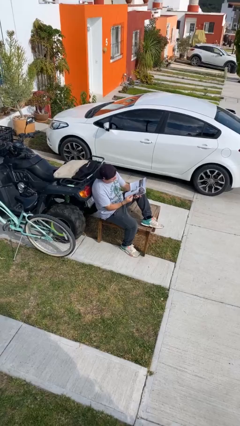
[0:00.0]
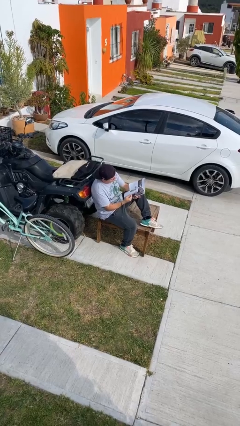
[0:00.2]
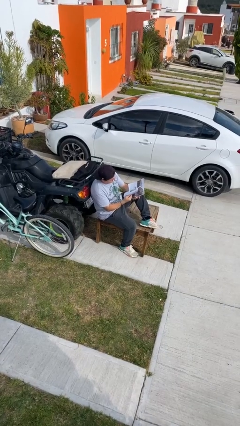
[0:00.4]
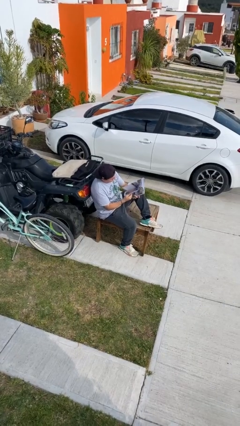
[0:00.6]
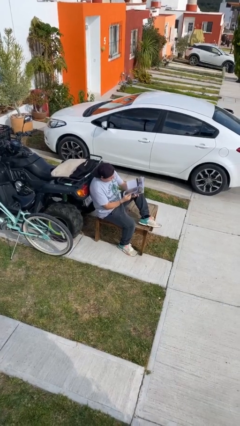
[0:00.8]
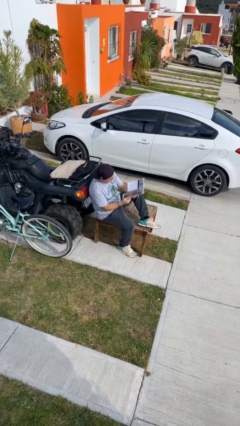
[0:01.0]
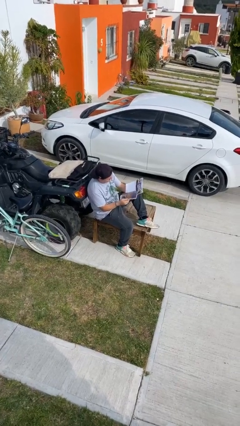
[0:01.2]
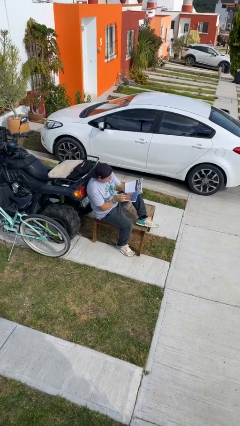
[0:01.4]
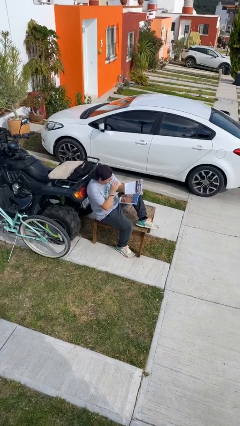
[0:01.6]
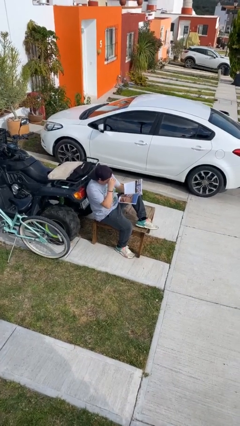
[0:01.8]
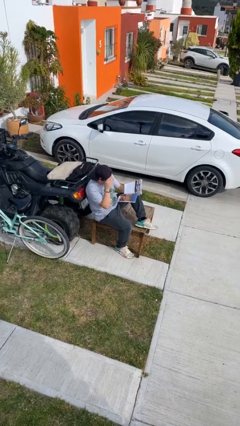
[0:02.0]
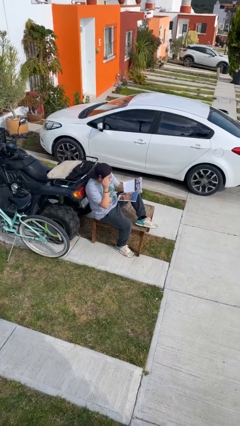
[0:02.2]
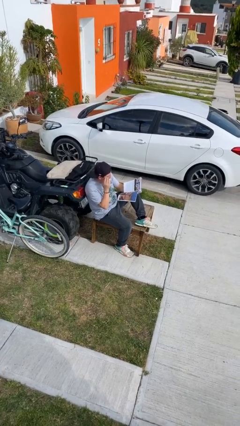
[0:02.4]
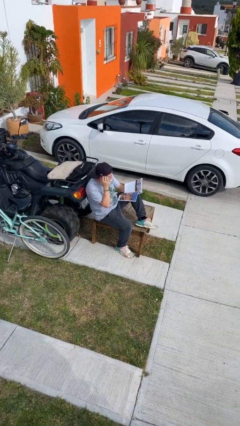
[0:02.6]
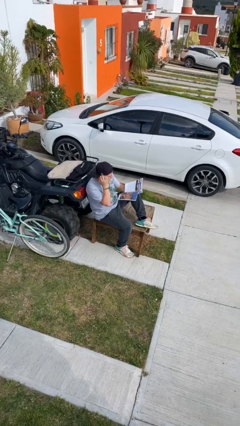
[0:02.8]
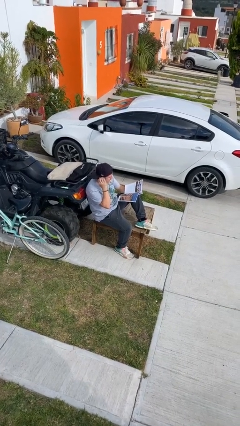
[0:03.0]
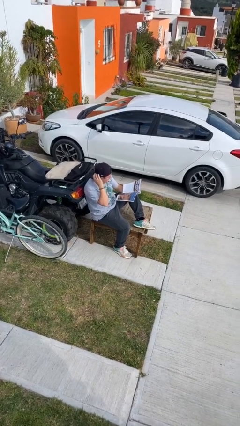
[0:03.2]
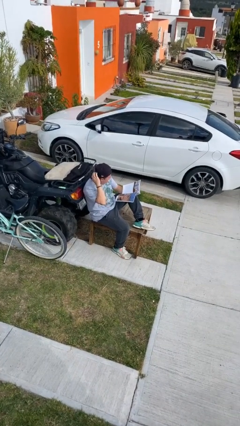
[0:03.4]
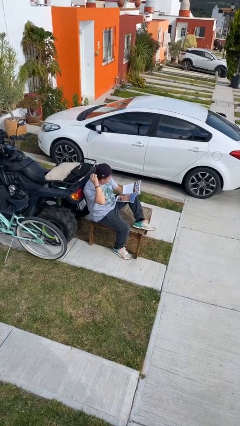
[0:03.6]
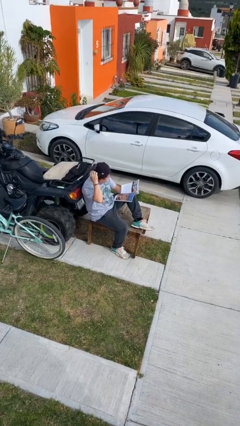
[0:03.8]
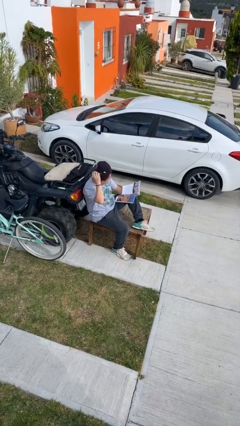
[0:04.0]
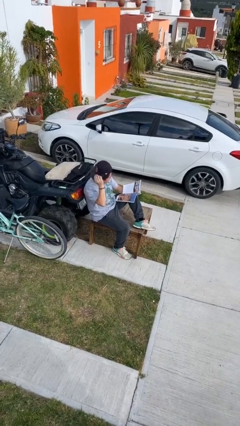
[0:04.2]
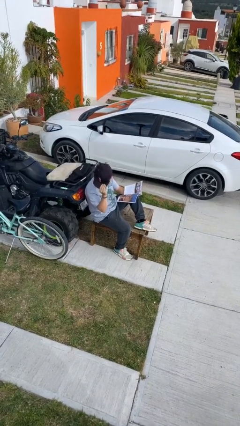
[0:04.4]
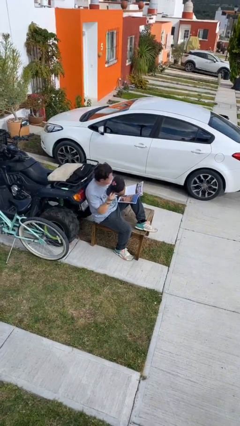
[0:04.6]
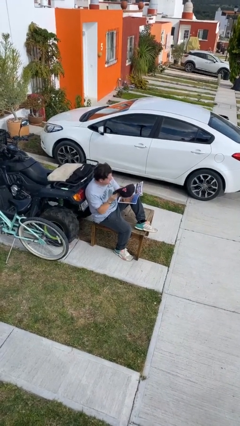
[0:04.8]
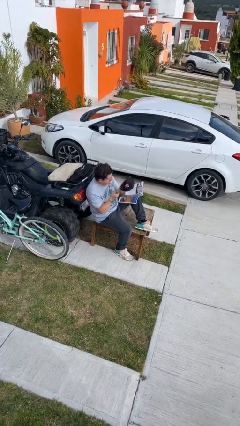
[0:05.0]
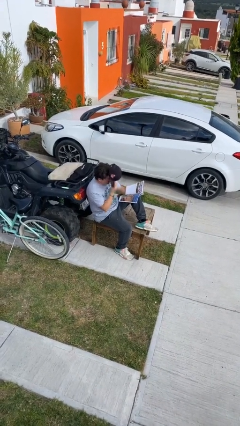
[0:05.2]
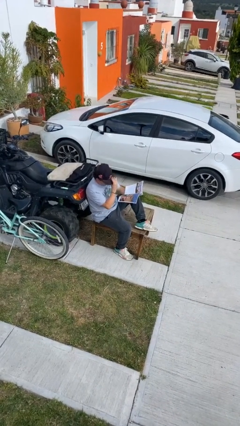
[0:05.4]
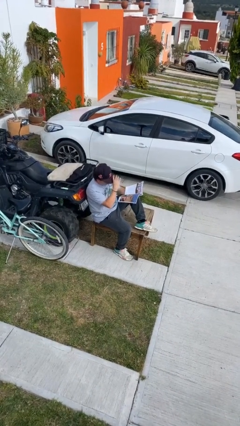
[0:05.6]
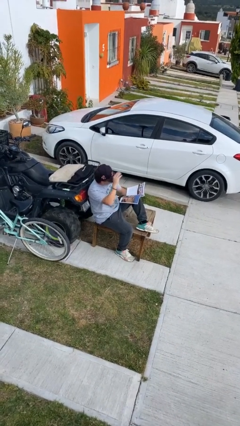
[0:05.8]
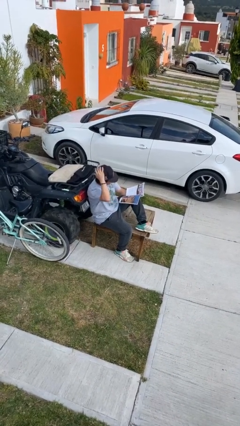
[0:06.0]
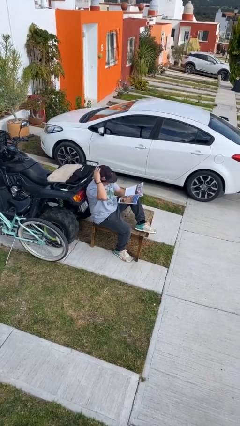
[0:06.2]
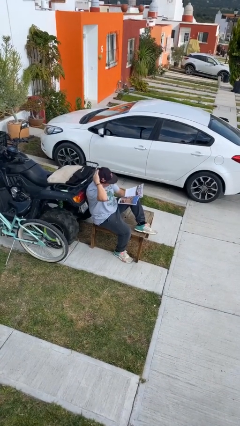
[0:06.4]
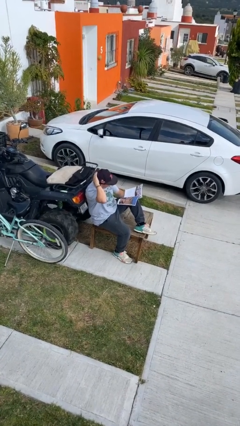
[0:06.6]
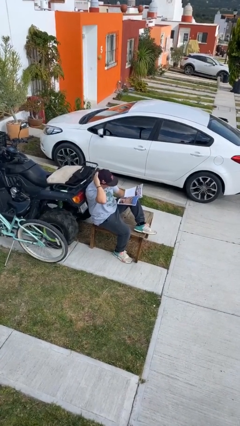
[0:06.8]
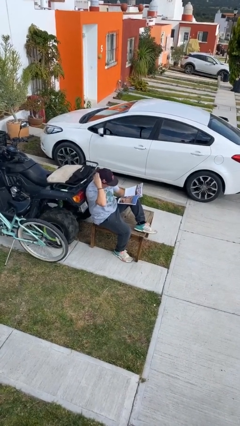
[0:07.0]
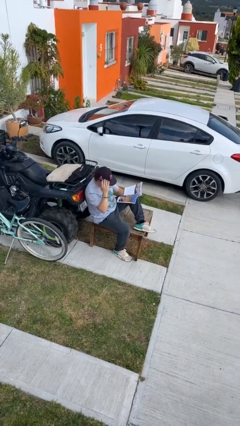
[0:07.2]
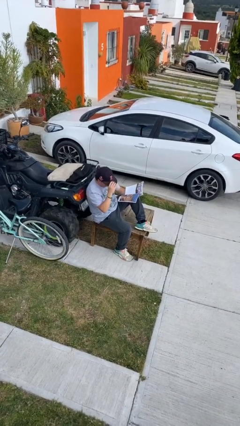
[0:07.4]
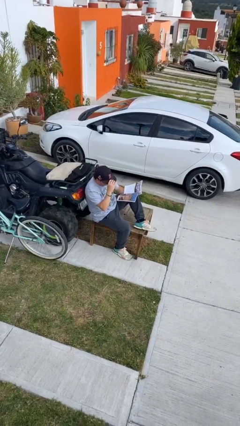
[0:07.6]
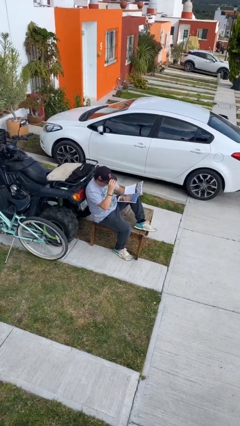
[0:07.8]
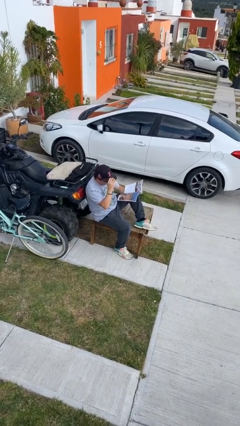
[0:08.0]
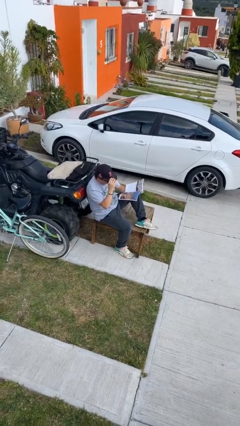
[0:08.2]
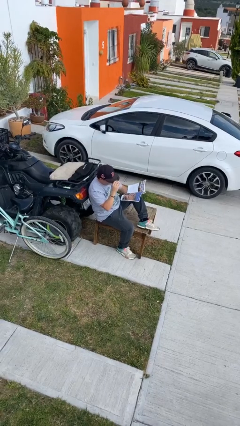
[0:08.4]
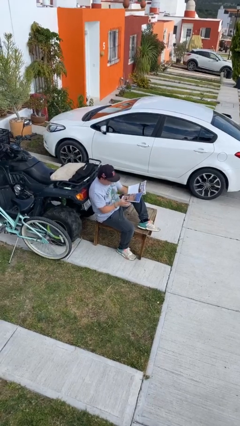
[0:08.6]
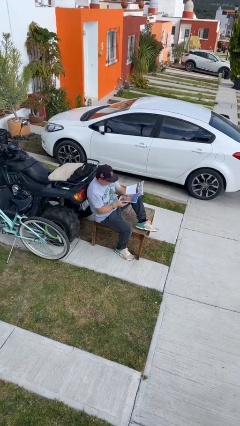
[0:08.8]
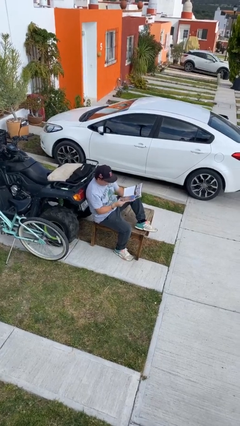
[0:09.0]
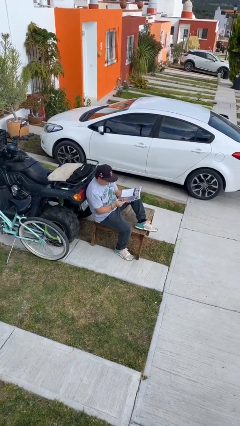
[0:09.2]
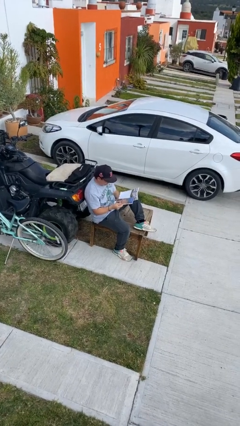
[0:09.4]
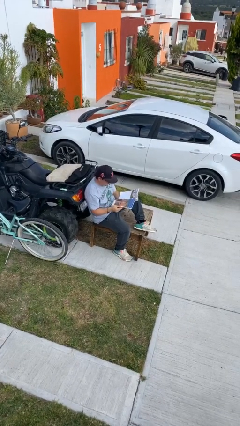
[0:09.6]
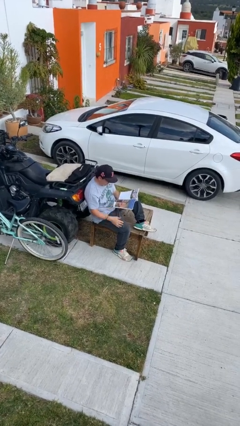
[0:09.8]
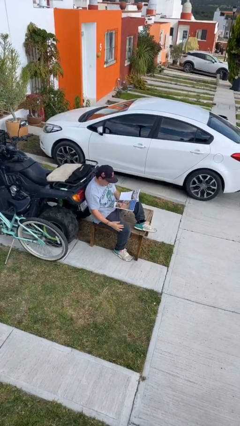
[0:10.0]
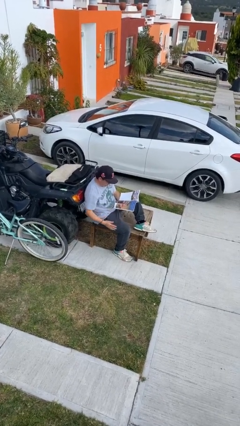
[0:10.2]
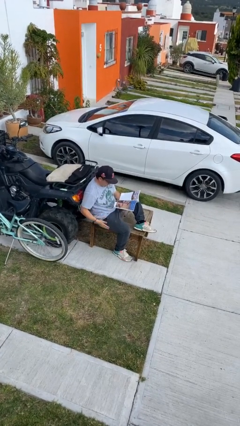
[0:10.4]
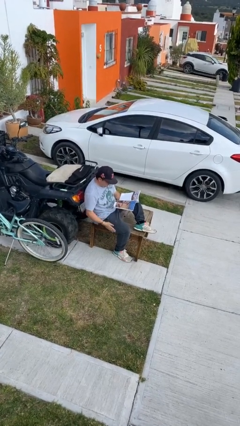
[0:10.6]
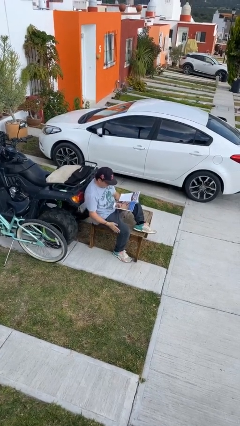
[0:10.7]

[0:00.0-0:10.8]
person reads document

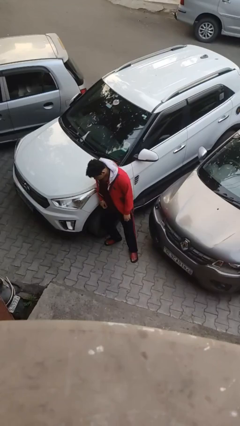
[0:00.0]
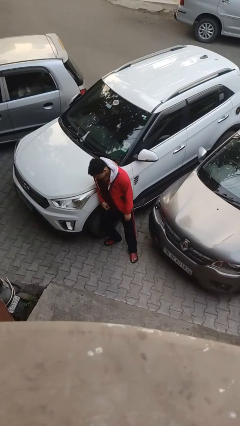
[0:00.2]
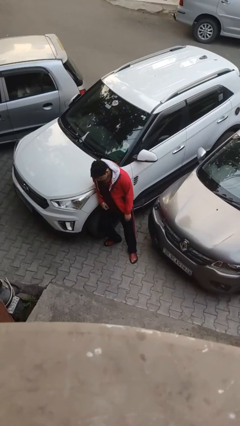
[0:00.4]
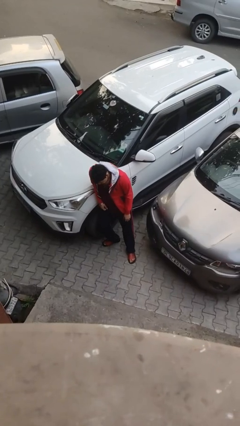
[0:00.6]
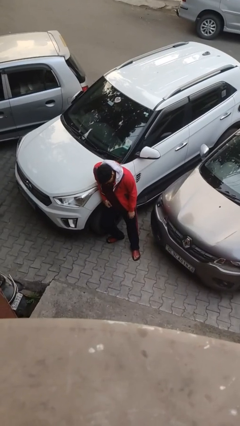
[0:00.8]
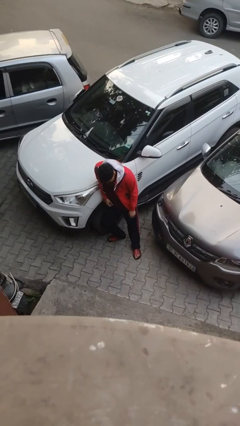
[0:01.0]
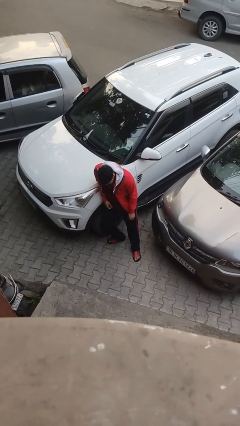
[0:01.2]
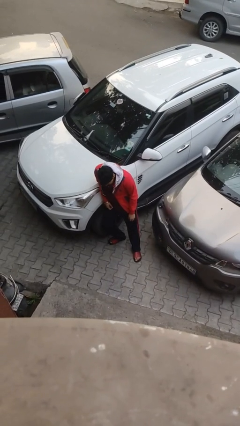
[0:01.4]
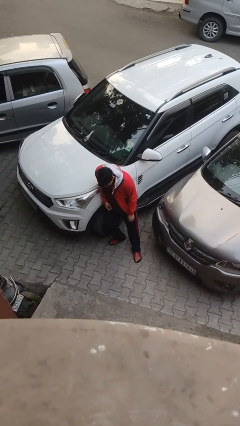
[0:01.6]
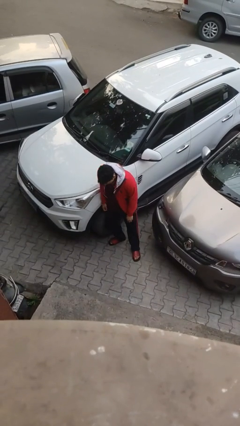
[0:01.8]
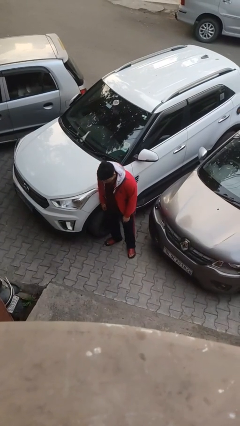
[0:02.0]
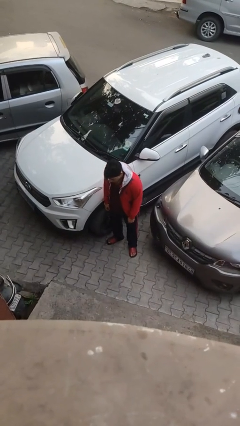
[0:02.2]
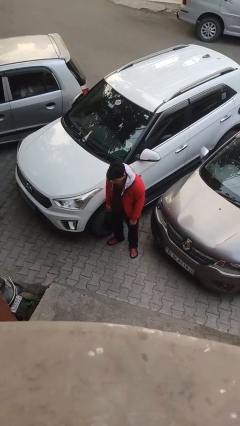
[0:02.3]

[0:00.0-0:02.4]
person leans against car

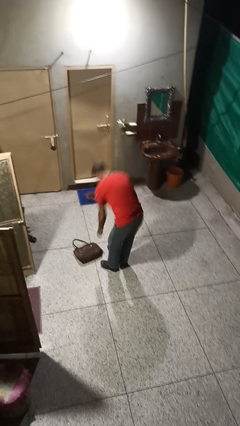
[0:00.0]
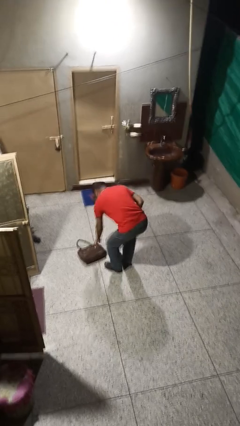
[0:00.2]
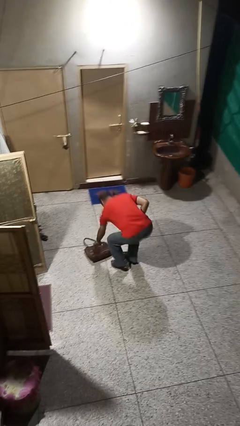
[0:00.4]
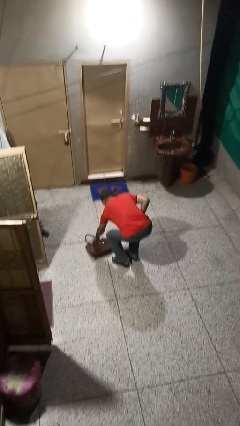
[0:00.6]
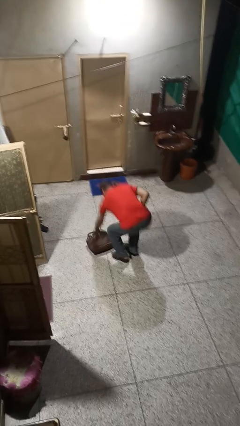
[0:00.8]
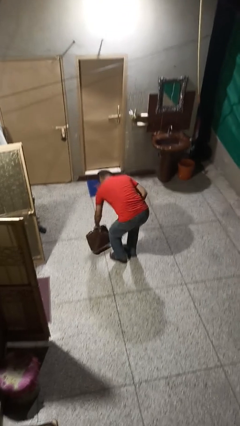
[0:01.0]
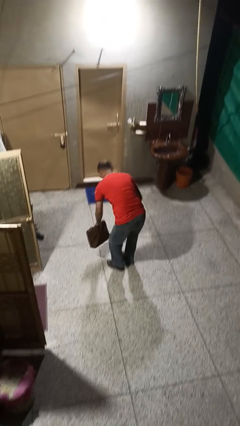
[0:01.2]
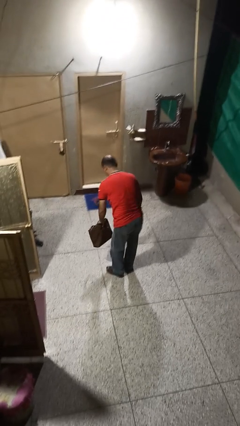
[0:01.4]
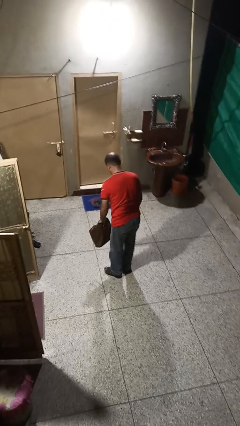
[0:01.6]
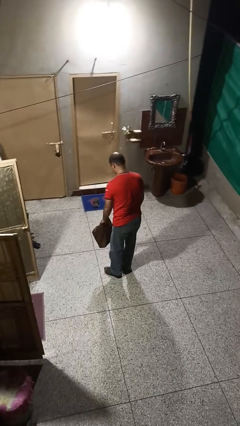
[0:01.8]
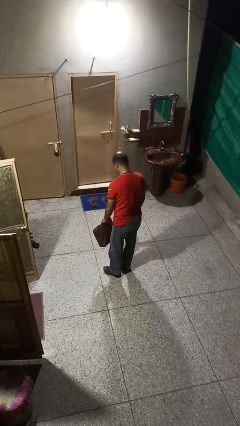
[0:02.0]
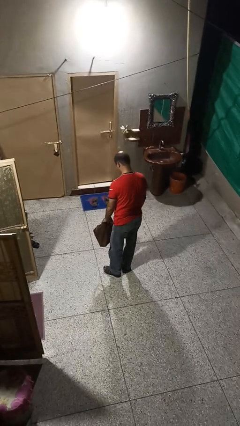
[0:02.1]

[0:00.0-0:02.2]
person picks up object from floor

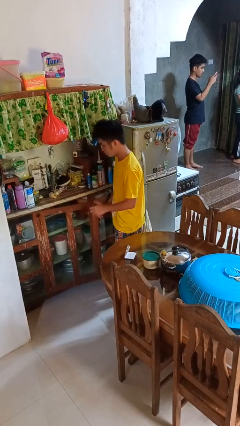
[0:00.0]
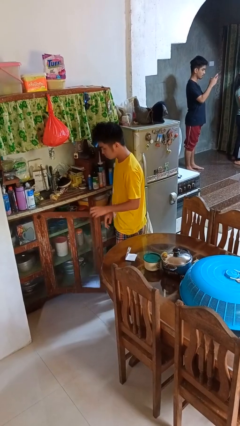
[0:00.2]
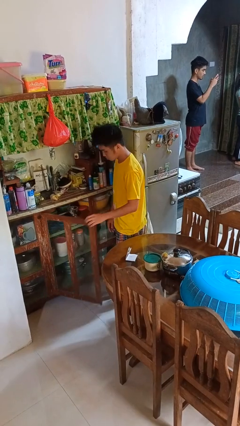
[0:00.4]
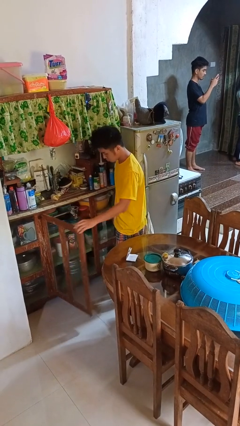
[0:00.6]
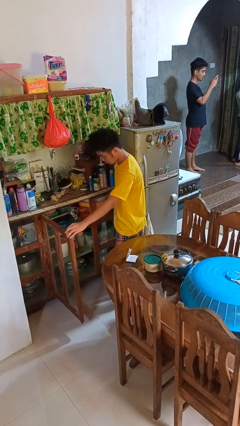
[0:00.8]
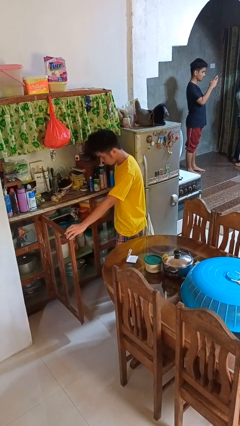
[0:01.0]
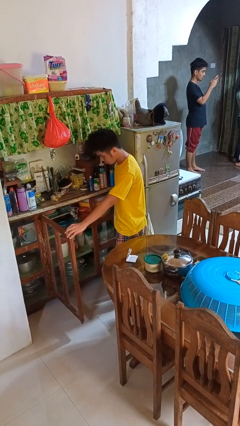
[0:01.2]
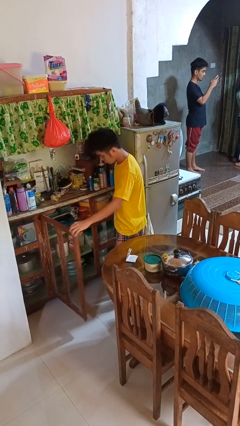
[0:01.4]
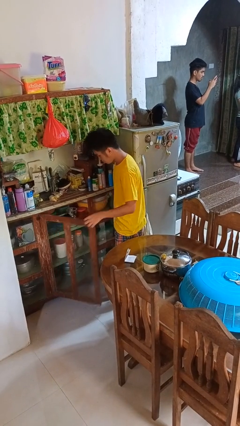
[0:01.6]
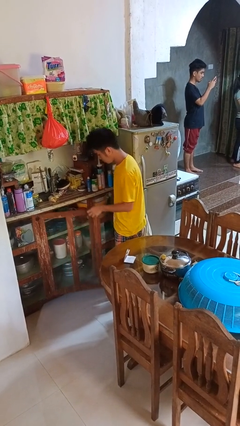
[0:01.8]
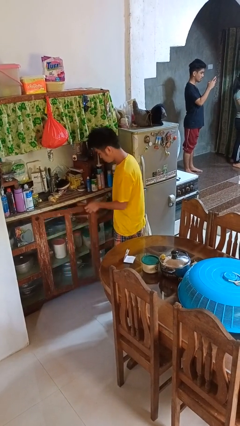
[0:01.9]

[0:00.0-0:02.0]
person opens cabinet
